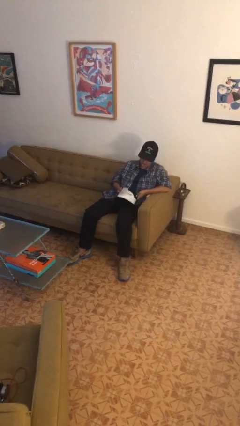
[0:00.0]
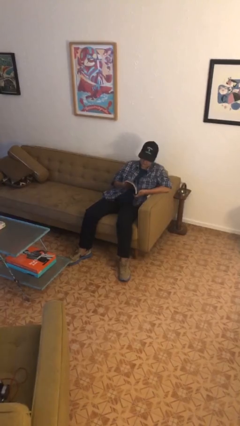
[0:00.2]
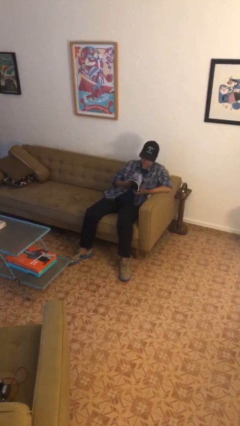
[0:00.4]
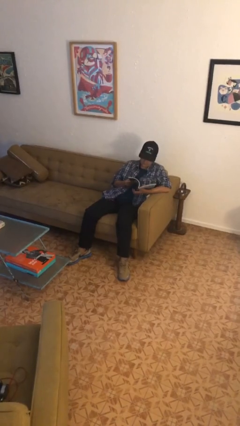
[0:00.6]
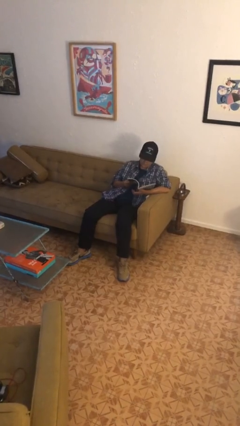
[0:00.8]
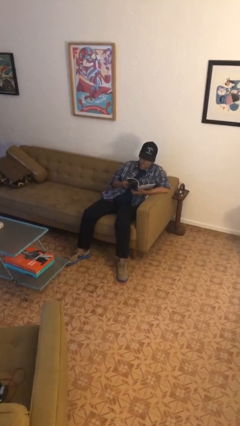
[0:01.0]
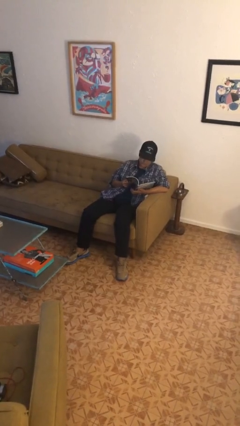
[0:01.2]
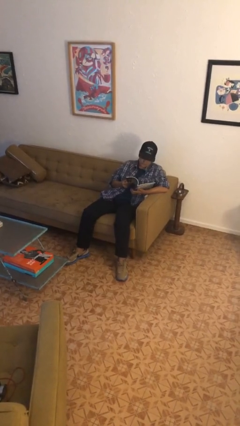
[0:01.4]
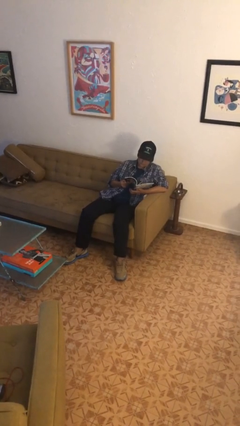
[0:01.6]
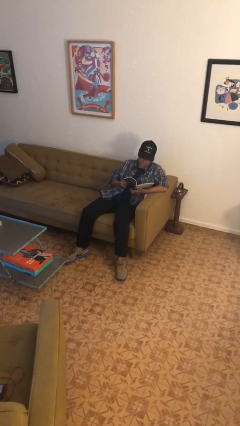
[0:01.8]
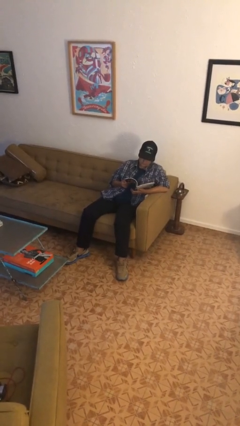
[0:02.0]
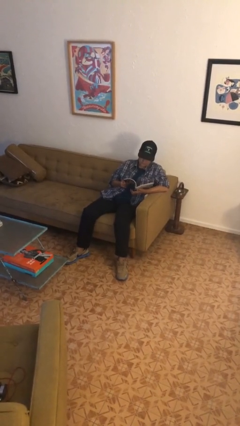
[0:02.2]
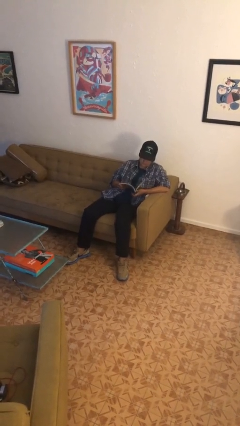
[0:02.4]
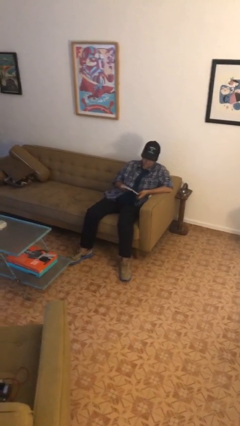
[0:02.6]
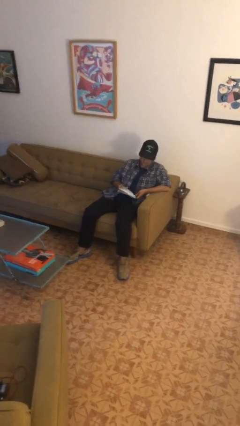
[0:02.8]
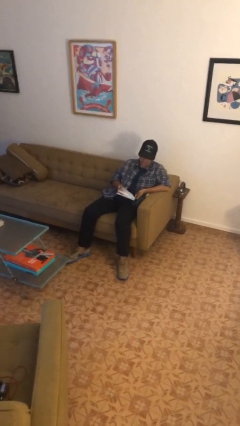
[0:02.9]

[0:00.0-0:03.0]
person reads magazine

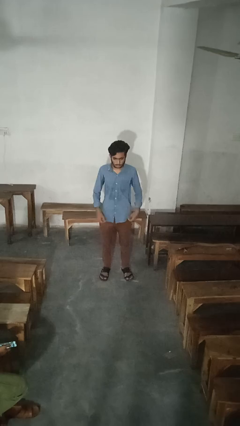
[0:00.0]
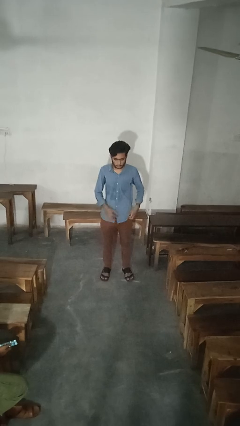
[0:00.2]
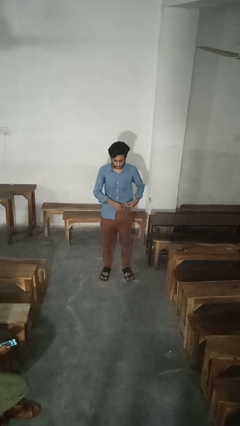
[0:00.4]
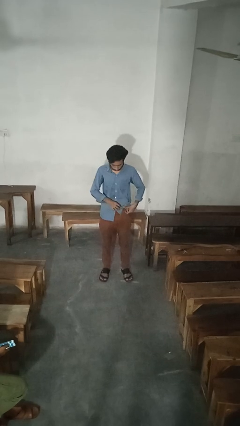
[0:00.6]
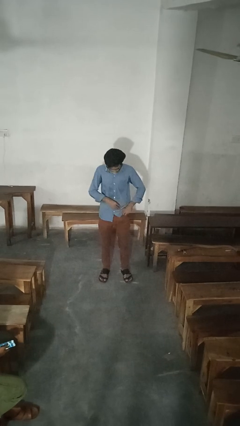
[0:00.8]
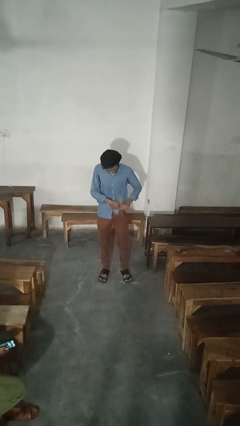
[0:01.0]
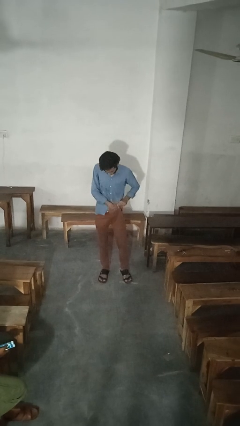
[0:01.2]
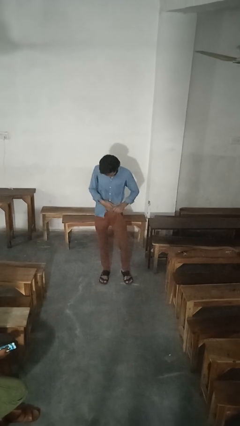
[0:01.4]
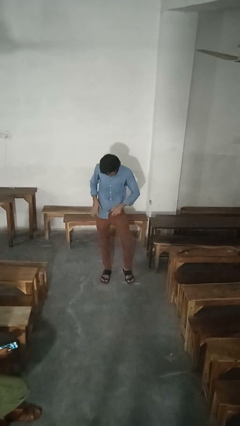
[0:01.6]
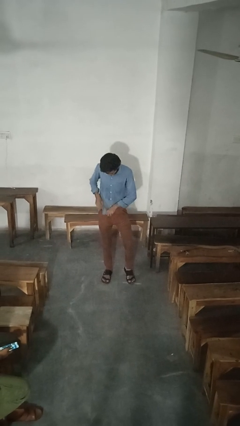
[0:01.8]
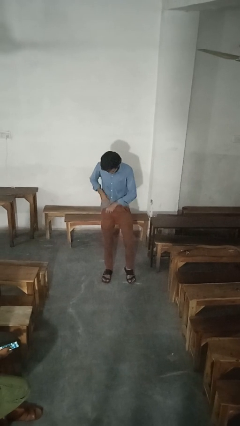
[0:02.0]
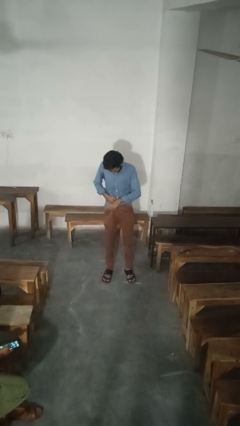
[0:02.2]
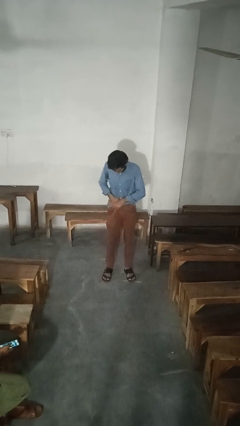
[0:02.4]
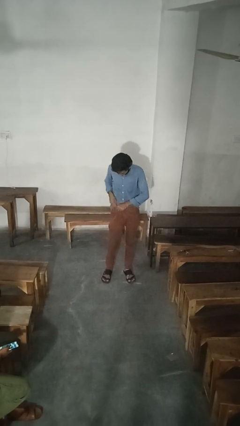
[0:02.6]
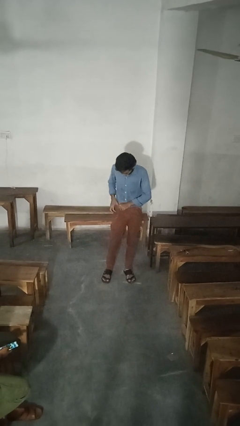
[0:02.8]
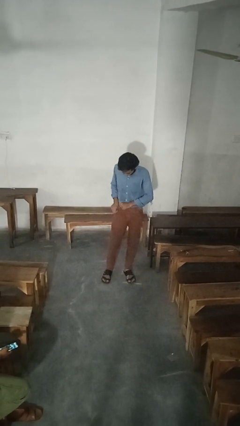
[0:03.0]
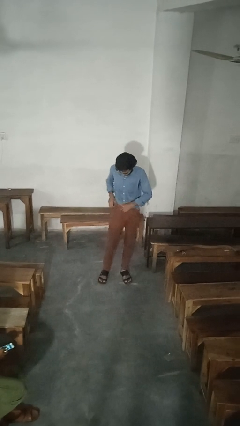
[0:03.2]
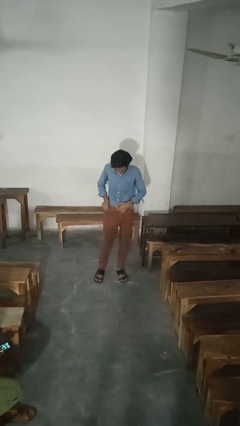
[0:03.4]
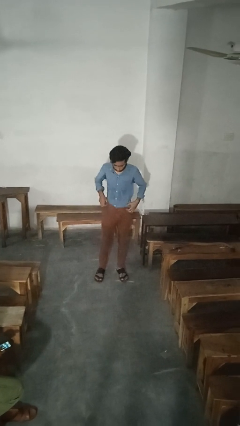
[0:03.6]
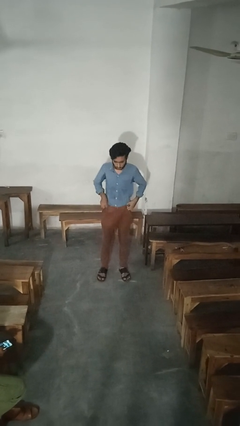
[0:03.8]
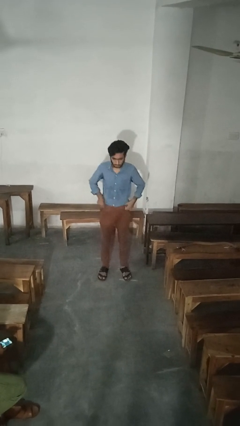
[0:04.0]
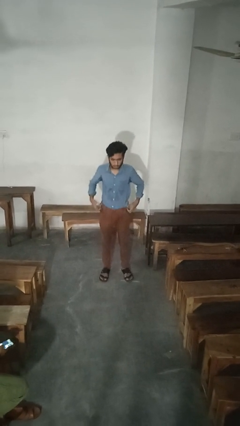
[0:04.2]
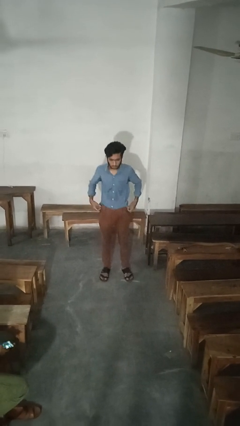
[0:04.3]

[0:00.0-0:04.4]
person tucks in shirt

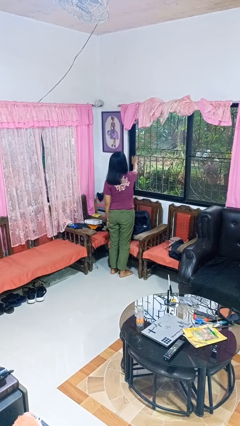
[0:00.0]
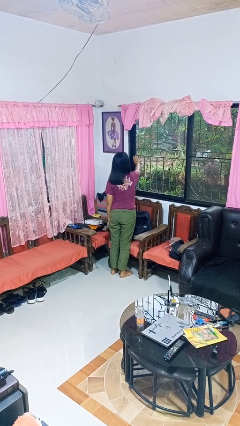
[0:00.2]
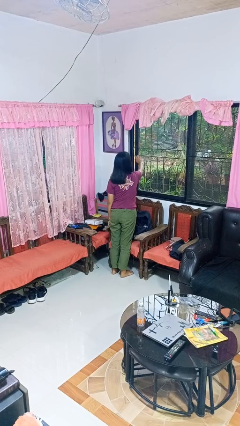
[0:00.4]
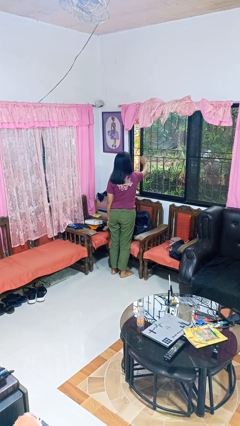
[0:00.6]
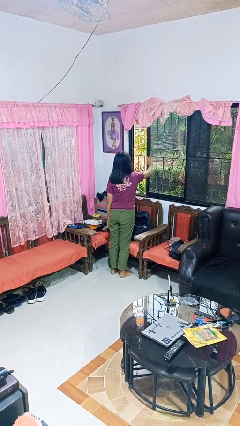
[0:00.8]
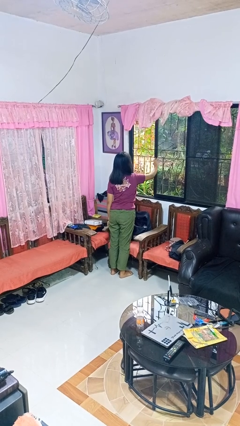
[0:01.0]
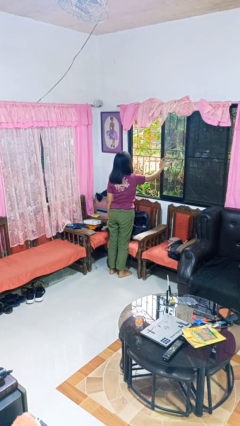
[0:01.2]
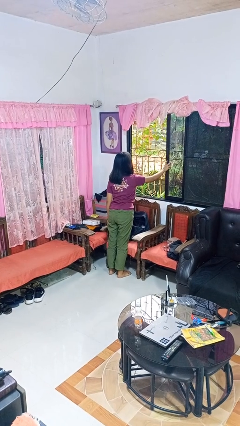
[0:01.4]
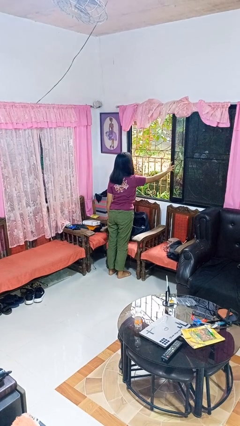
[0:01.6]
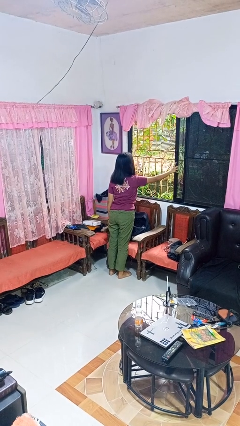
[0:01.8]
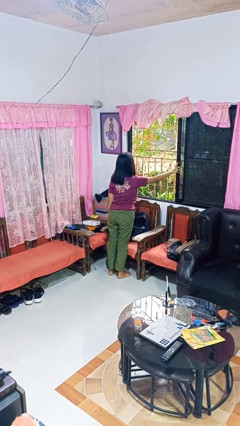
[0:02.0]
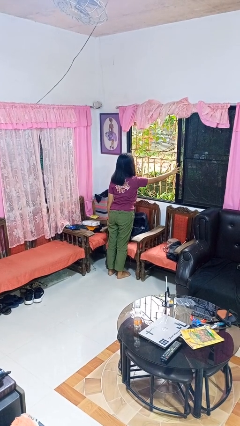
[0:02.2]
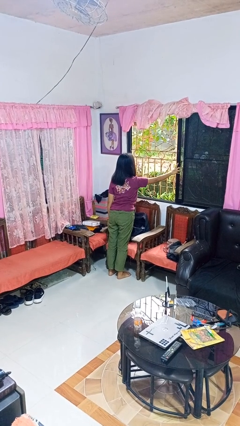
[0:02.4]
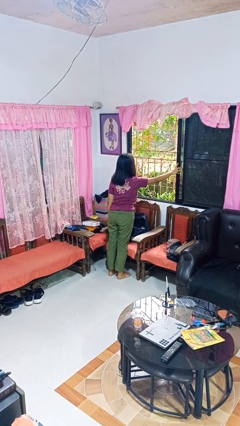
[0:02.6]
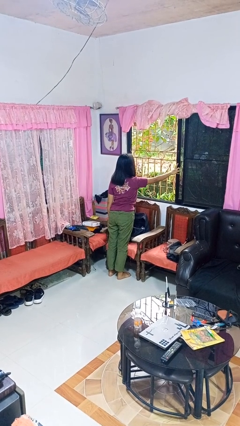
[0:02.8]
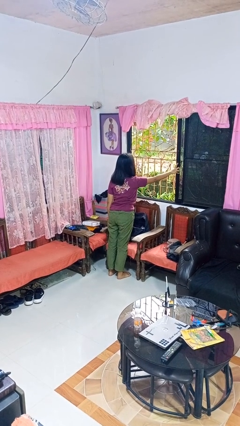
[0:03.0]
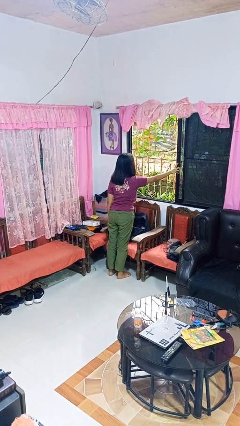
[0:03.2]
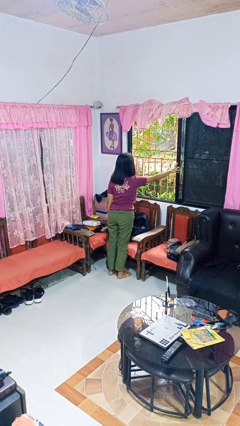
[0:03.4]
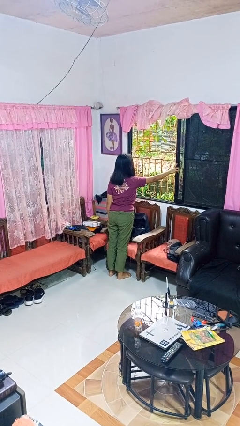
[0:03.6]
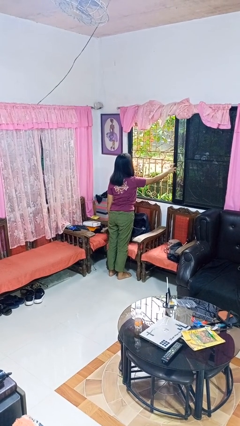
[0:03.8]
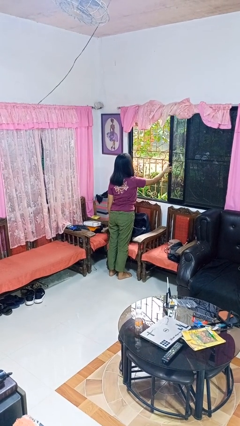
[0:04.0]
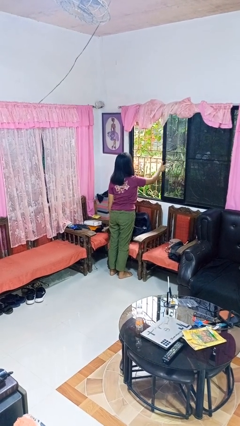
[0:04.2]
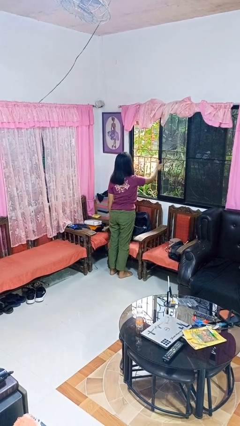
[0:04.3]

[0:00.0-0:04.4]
person opens home window

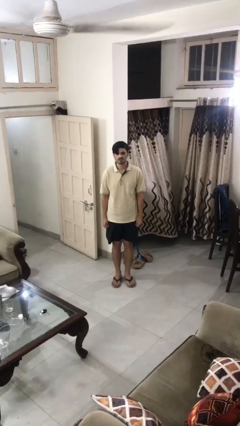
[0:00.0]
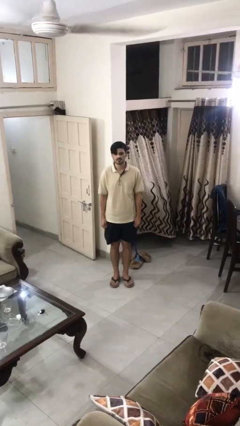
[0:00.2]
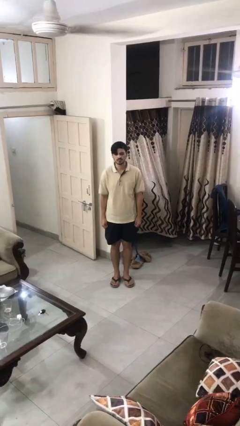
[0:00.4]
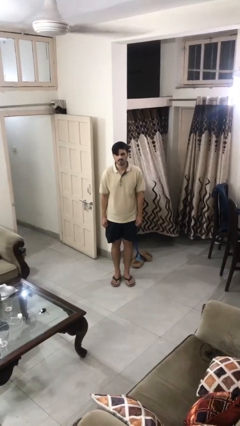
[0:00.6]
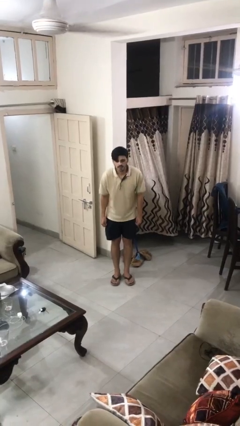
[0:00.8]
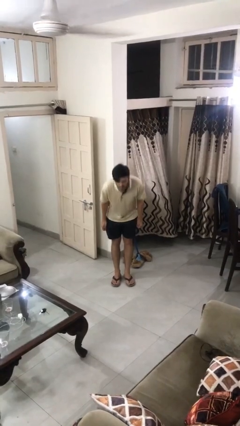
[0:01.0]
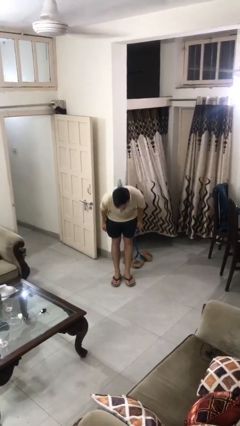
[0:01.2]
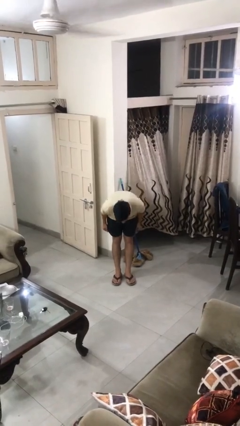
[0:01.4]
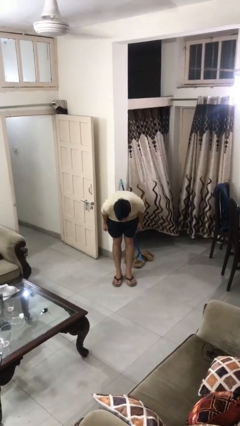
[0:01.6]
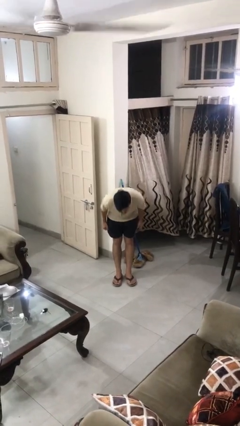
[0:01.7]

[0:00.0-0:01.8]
person bows

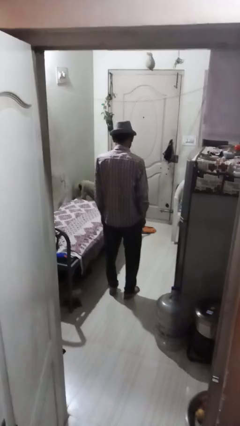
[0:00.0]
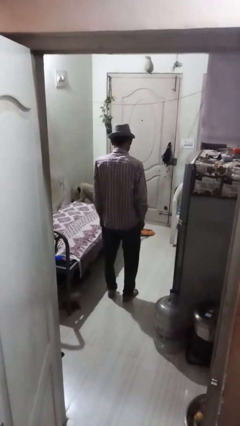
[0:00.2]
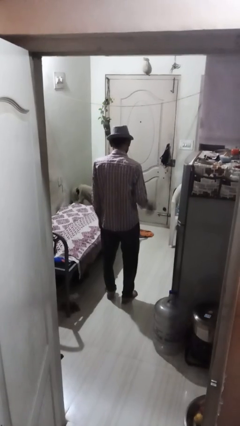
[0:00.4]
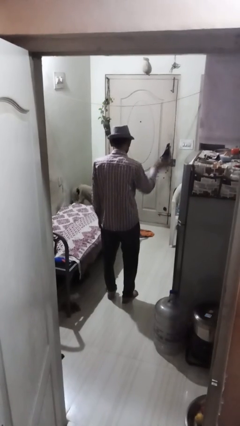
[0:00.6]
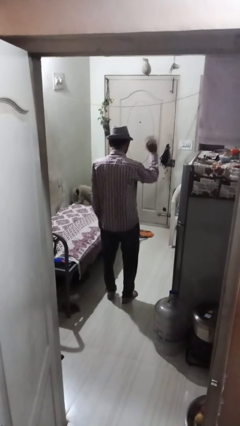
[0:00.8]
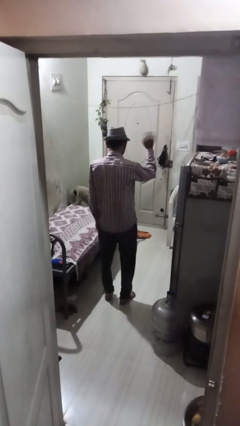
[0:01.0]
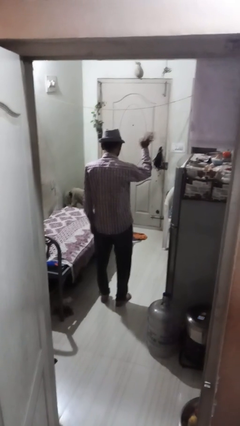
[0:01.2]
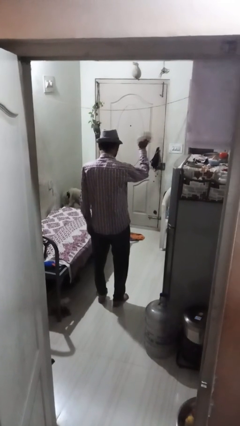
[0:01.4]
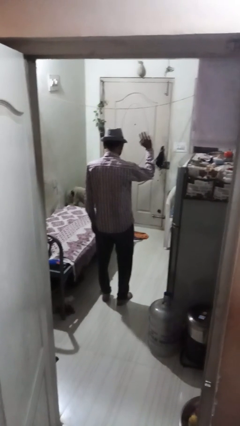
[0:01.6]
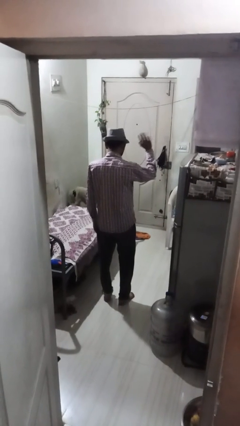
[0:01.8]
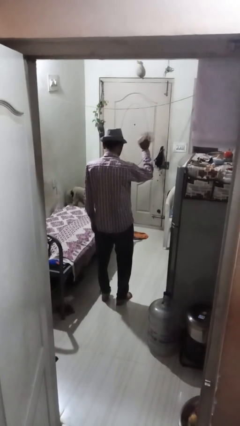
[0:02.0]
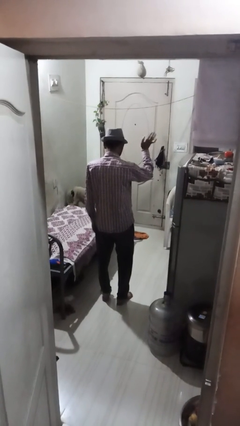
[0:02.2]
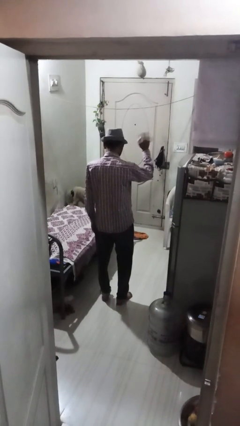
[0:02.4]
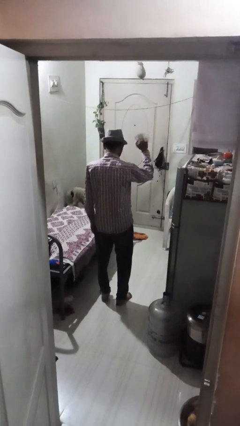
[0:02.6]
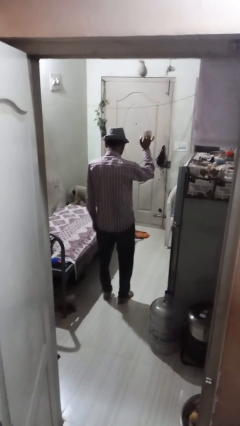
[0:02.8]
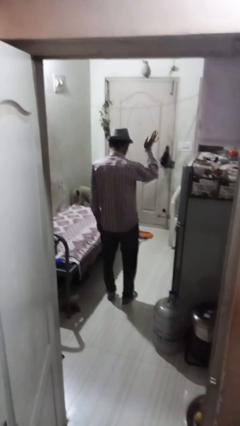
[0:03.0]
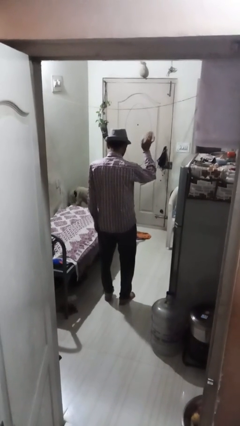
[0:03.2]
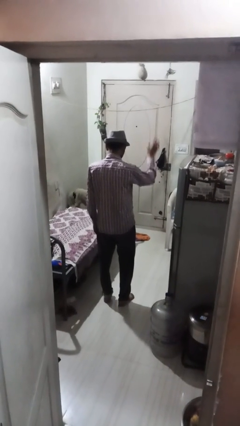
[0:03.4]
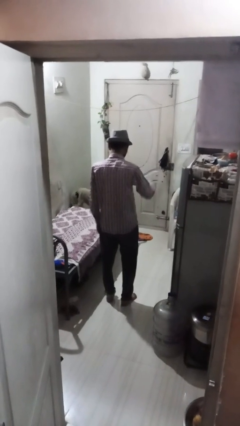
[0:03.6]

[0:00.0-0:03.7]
person waves at person
